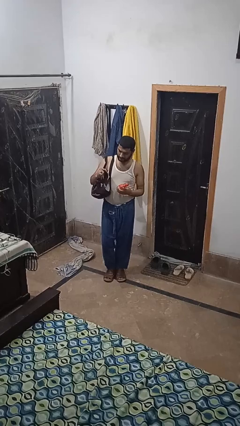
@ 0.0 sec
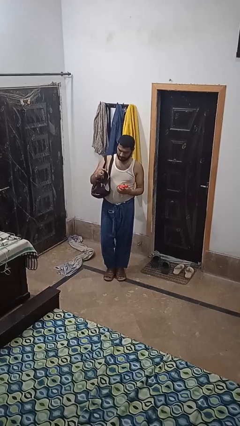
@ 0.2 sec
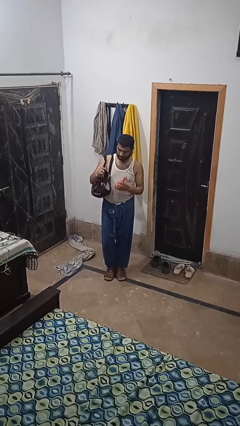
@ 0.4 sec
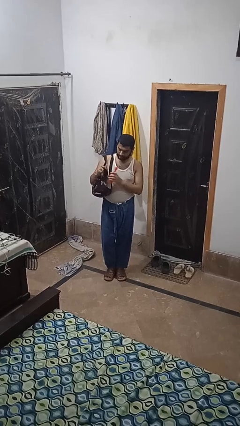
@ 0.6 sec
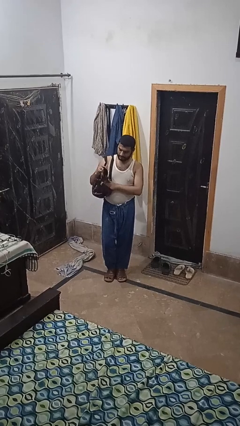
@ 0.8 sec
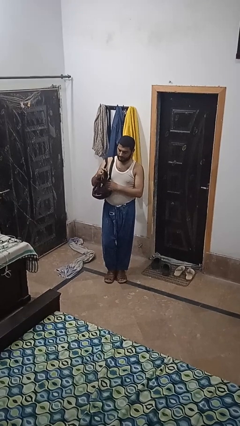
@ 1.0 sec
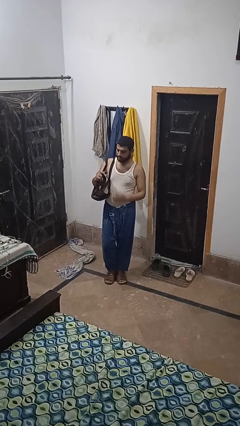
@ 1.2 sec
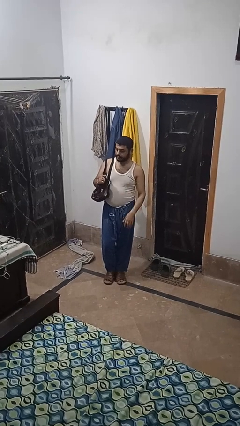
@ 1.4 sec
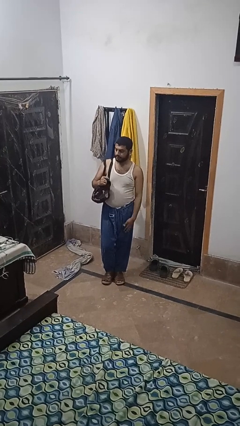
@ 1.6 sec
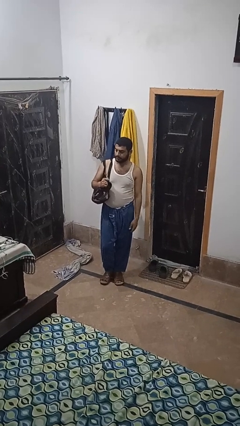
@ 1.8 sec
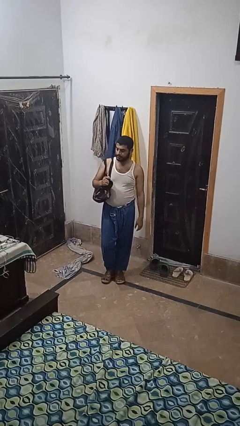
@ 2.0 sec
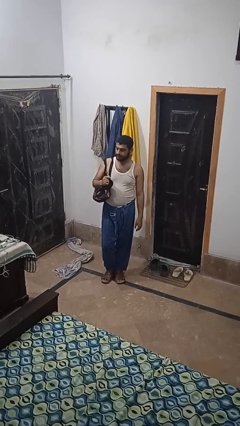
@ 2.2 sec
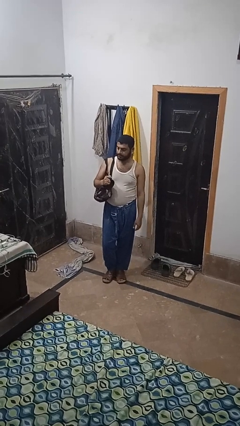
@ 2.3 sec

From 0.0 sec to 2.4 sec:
person puts object into purse

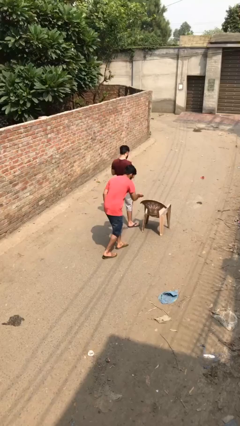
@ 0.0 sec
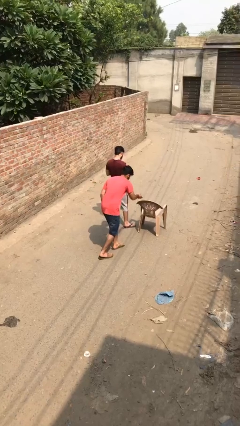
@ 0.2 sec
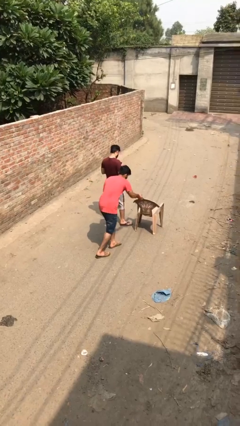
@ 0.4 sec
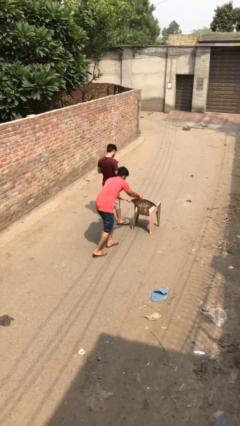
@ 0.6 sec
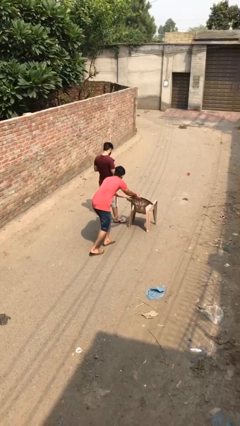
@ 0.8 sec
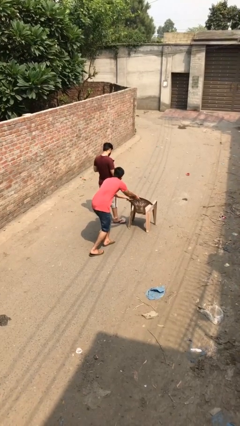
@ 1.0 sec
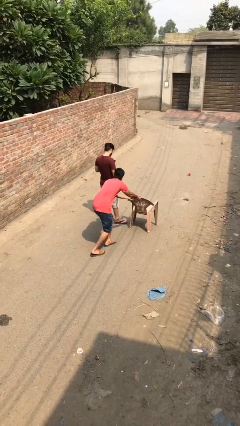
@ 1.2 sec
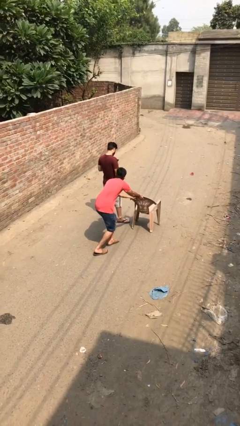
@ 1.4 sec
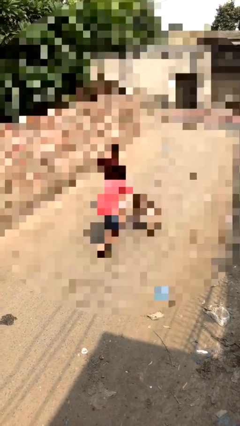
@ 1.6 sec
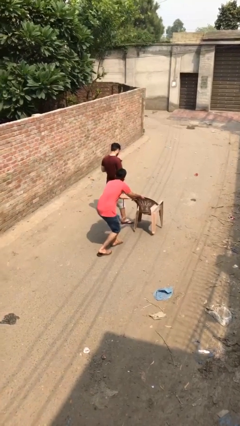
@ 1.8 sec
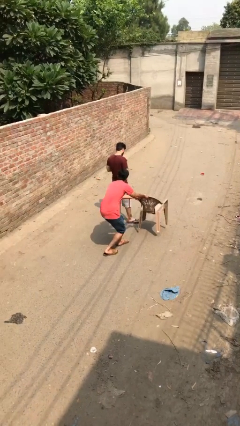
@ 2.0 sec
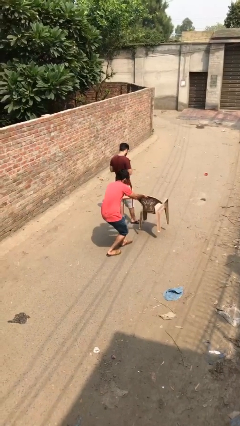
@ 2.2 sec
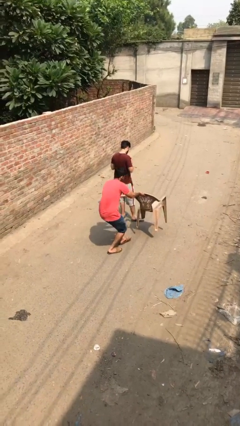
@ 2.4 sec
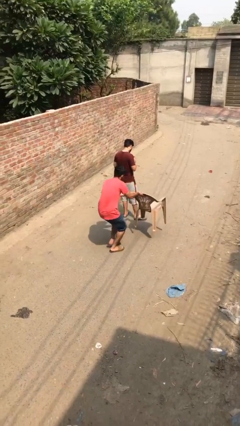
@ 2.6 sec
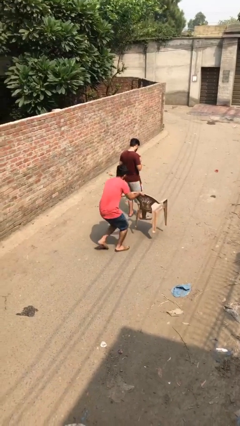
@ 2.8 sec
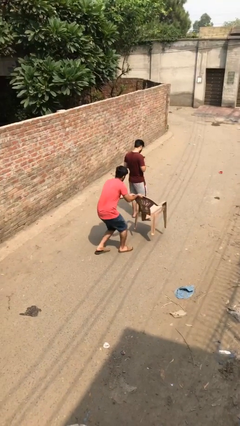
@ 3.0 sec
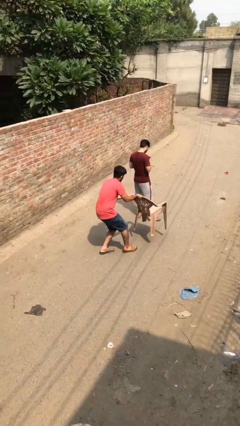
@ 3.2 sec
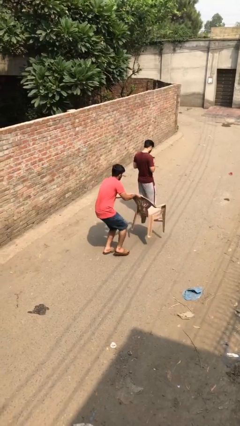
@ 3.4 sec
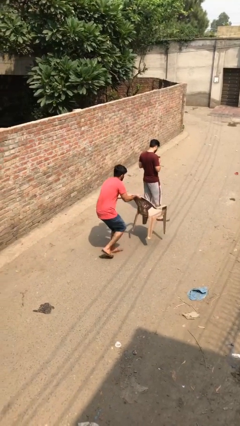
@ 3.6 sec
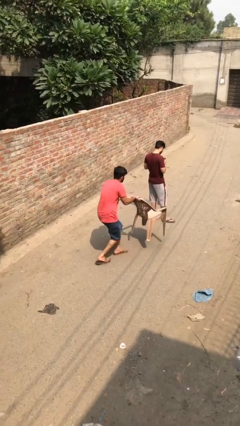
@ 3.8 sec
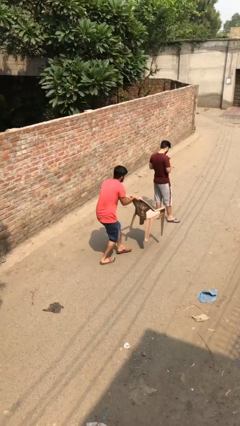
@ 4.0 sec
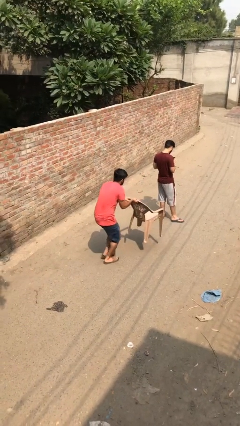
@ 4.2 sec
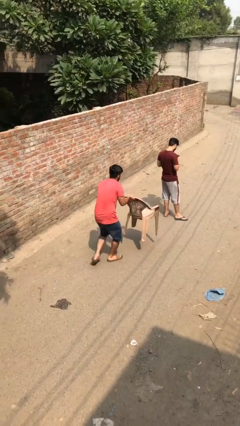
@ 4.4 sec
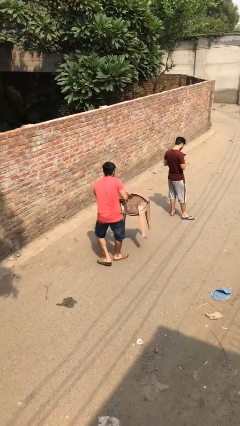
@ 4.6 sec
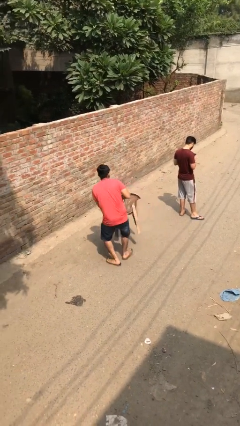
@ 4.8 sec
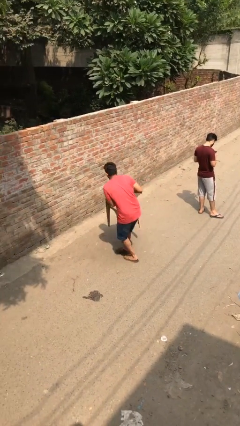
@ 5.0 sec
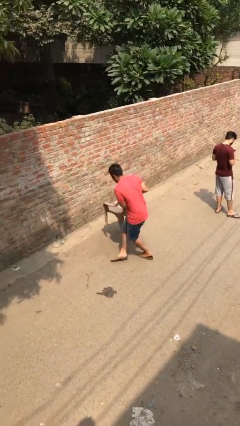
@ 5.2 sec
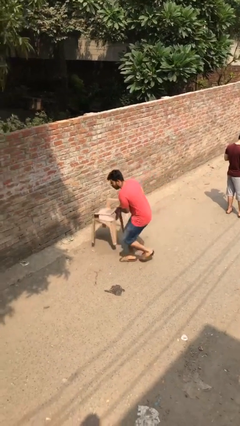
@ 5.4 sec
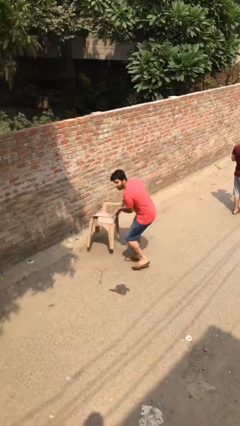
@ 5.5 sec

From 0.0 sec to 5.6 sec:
person steals object from person

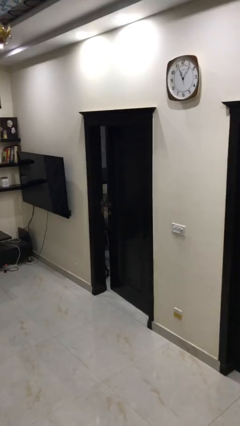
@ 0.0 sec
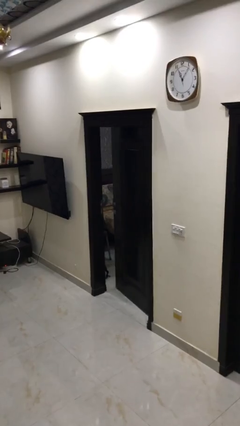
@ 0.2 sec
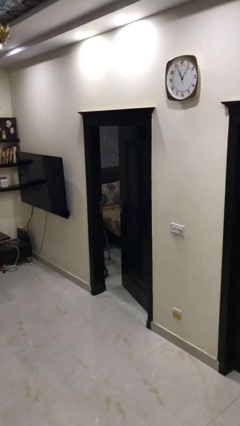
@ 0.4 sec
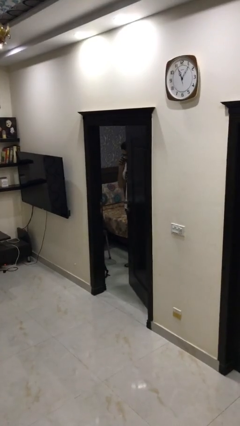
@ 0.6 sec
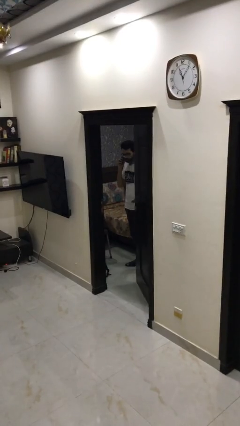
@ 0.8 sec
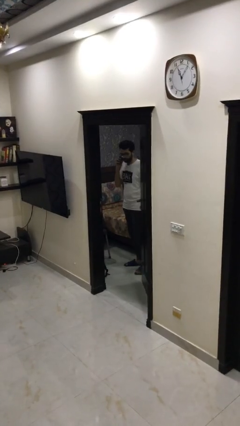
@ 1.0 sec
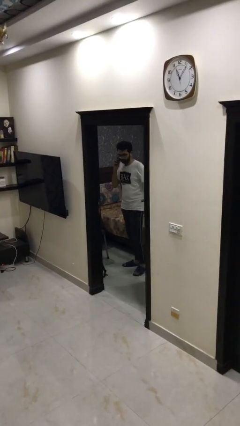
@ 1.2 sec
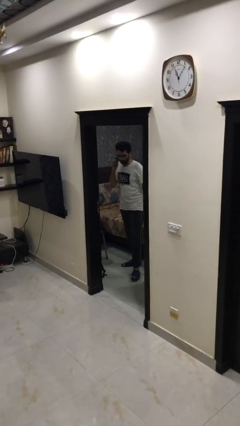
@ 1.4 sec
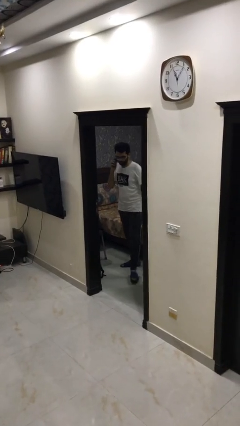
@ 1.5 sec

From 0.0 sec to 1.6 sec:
person opens facility door

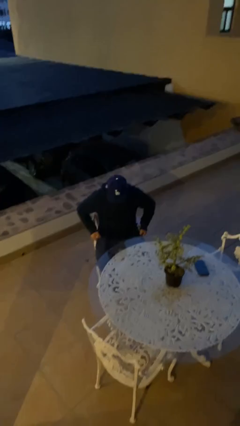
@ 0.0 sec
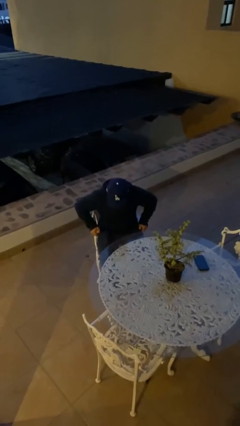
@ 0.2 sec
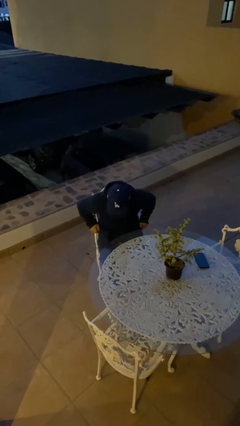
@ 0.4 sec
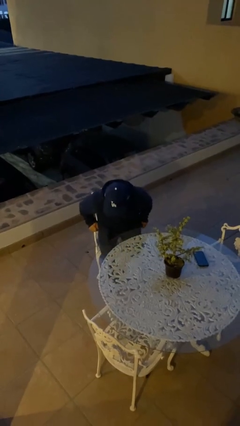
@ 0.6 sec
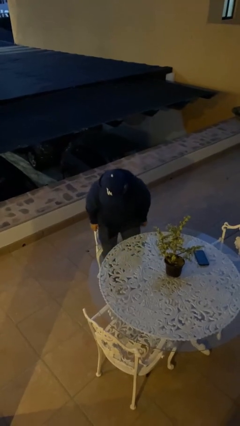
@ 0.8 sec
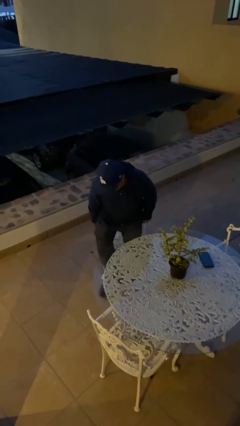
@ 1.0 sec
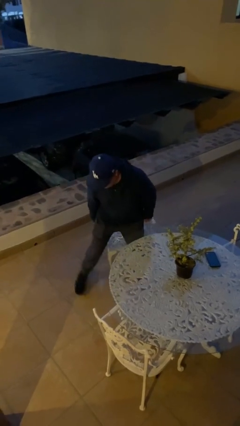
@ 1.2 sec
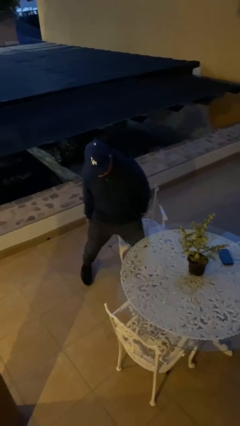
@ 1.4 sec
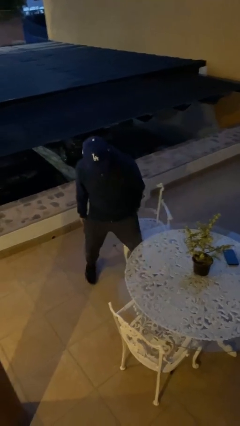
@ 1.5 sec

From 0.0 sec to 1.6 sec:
person stands up

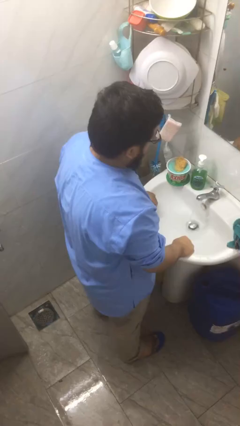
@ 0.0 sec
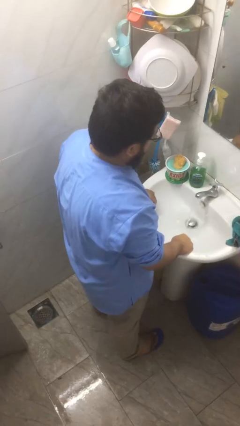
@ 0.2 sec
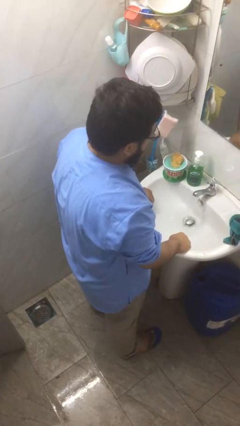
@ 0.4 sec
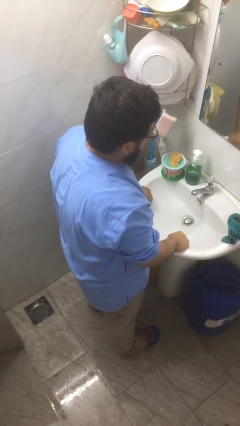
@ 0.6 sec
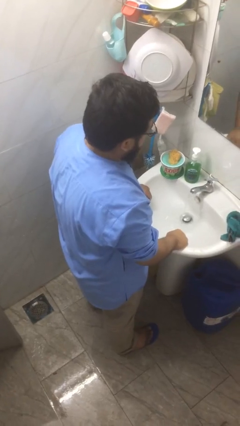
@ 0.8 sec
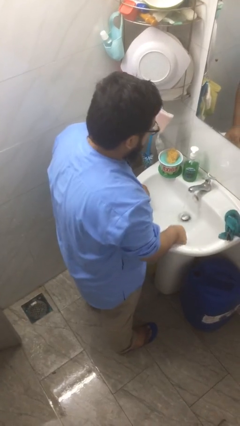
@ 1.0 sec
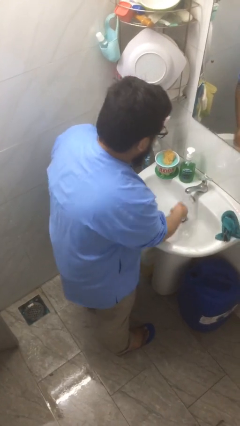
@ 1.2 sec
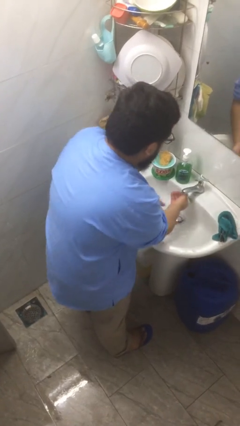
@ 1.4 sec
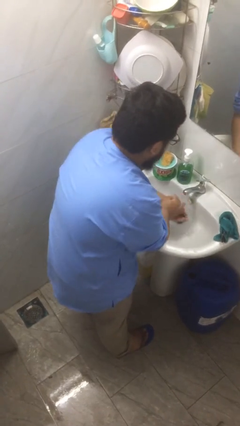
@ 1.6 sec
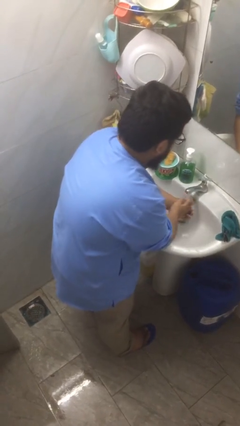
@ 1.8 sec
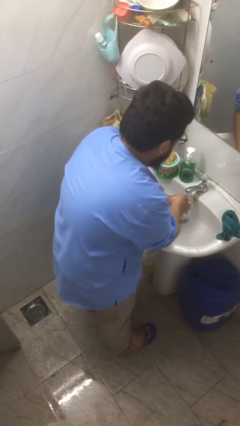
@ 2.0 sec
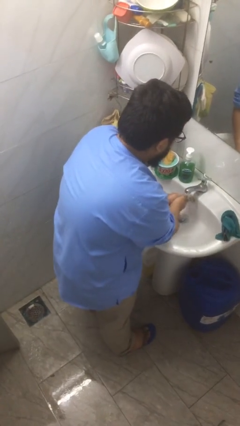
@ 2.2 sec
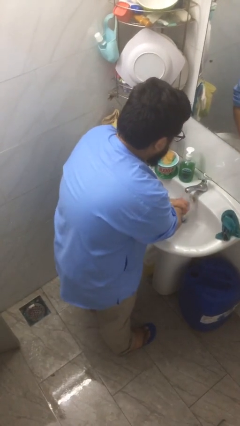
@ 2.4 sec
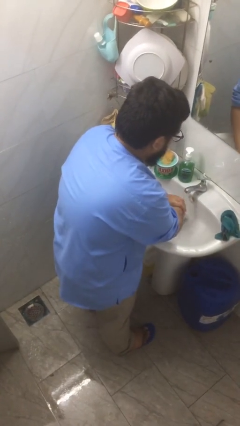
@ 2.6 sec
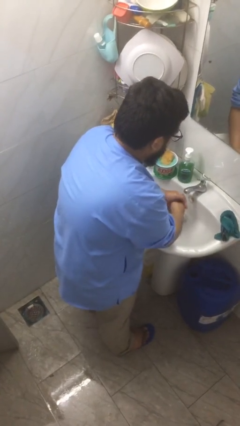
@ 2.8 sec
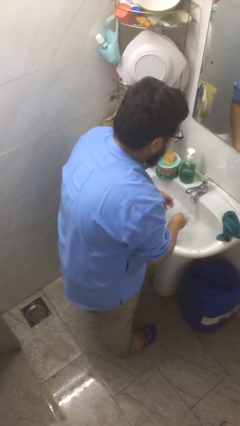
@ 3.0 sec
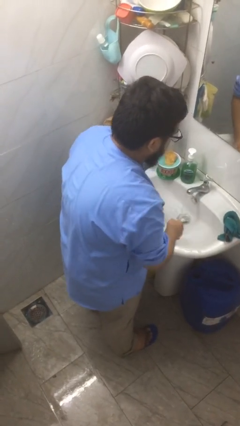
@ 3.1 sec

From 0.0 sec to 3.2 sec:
person washes hands

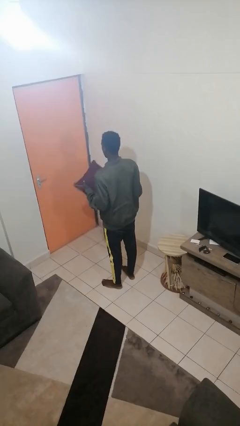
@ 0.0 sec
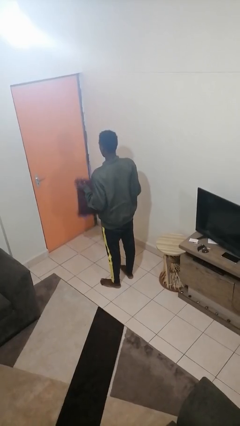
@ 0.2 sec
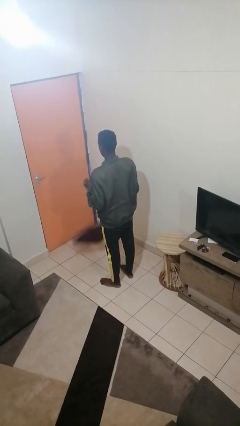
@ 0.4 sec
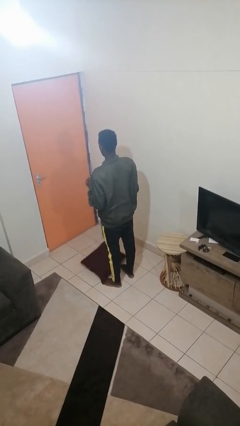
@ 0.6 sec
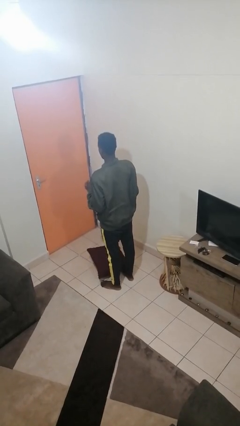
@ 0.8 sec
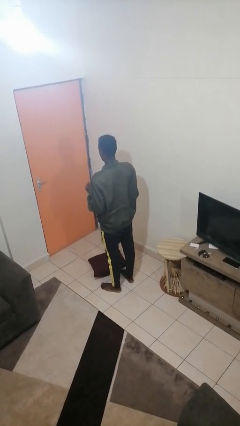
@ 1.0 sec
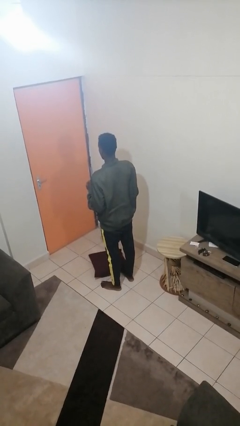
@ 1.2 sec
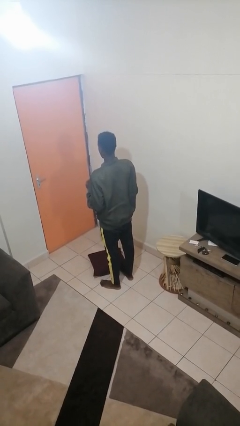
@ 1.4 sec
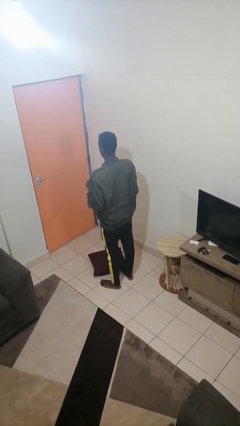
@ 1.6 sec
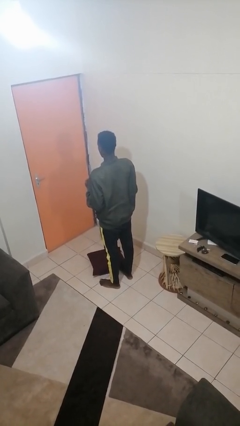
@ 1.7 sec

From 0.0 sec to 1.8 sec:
person drops object

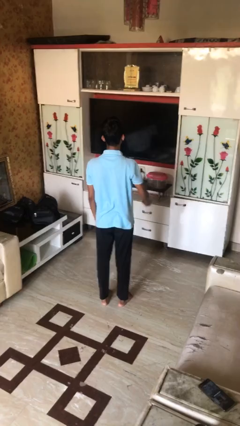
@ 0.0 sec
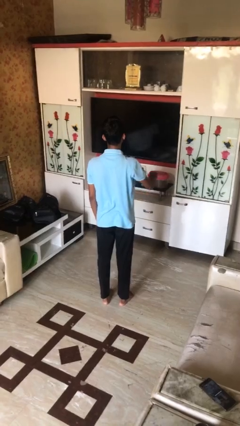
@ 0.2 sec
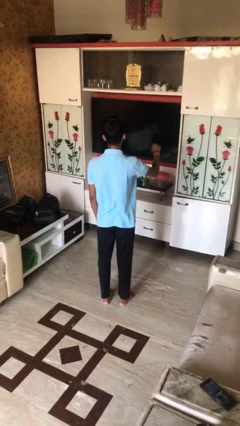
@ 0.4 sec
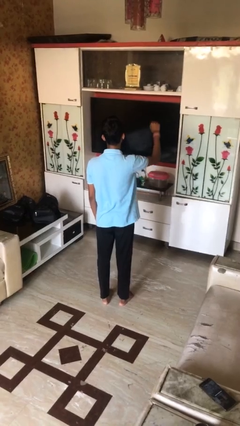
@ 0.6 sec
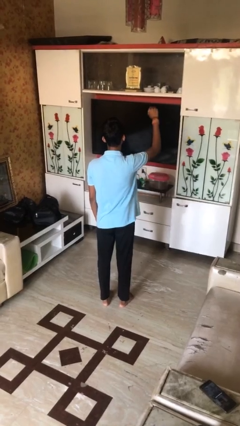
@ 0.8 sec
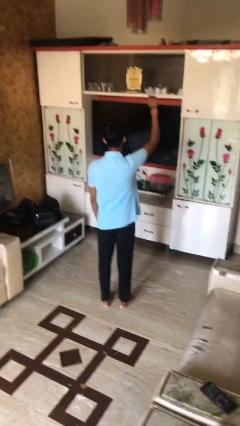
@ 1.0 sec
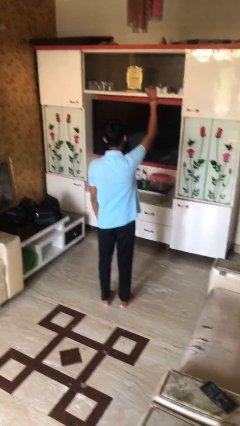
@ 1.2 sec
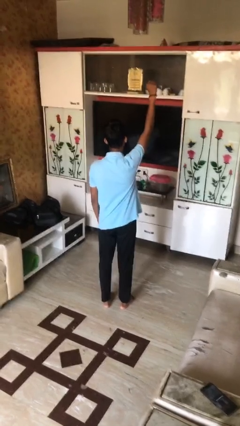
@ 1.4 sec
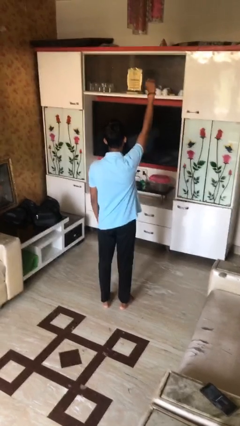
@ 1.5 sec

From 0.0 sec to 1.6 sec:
person gestures raise hand
